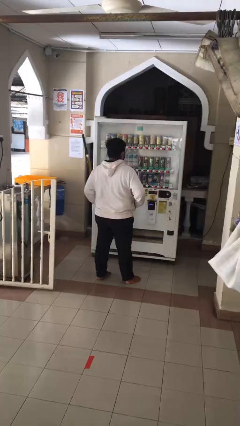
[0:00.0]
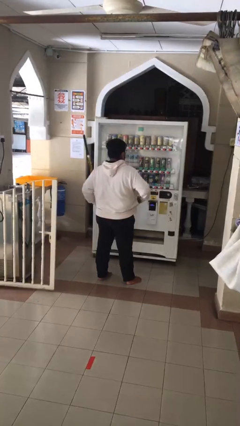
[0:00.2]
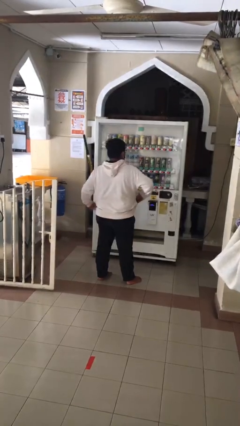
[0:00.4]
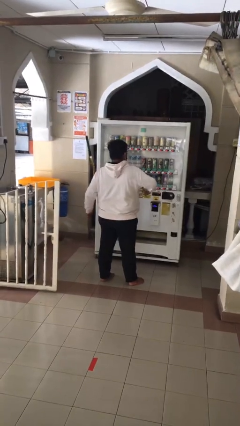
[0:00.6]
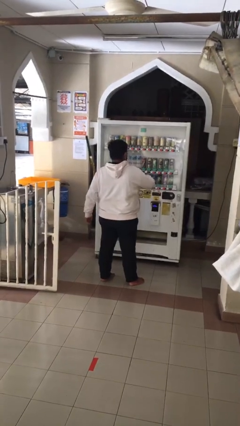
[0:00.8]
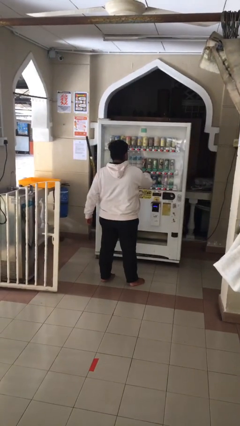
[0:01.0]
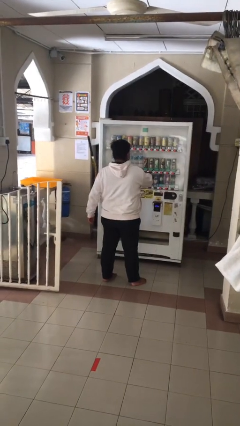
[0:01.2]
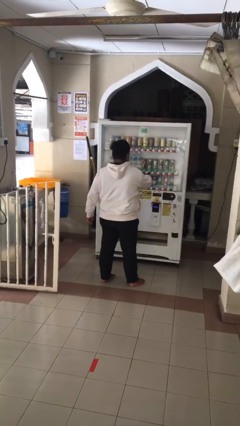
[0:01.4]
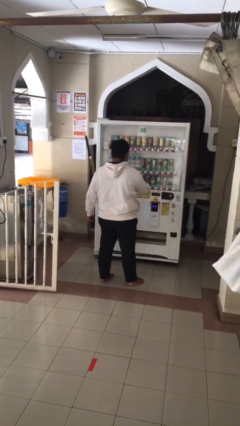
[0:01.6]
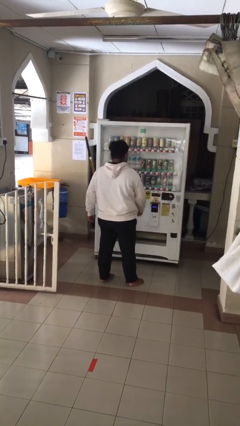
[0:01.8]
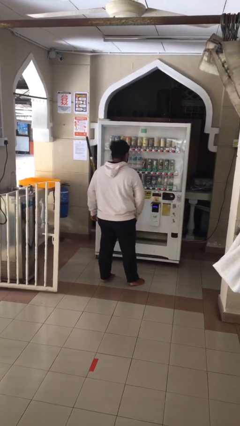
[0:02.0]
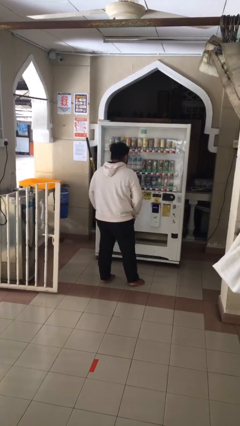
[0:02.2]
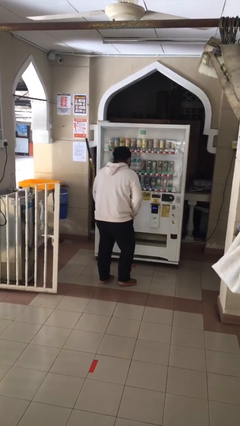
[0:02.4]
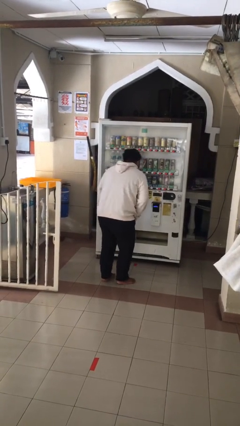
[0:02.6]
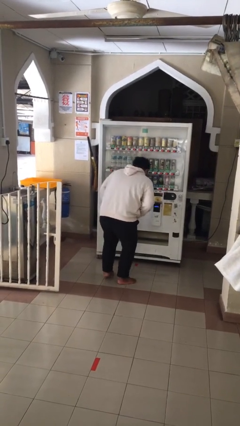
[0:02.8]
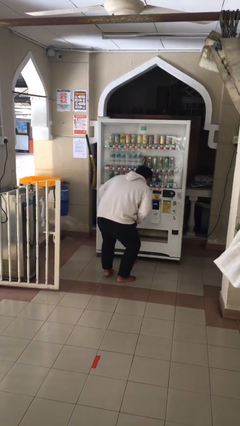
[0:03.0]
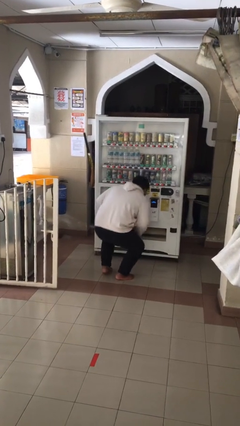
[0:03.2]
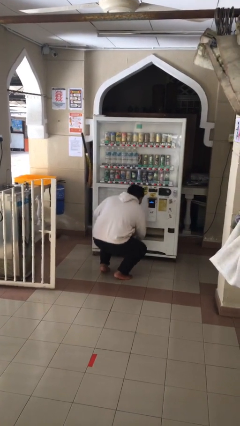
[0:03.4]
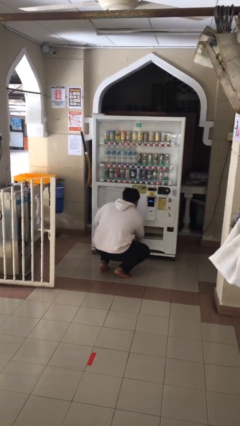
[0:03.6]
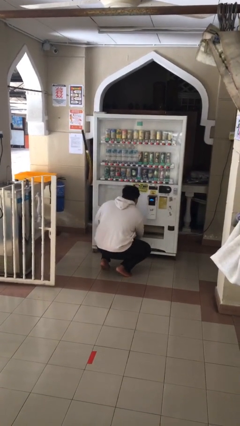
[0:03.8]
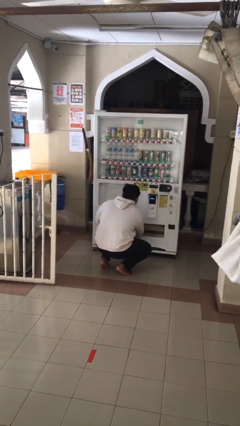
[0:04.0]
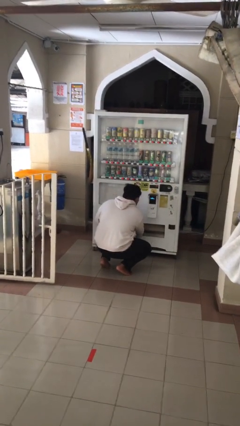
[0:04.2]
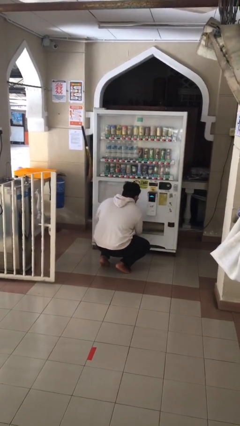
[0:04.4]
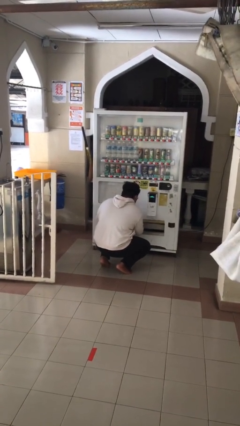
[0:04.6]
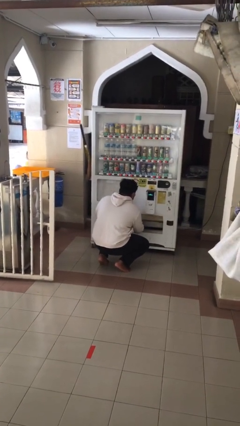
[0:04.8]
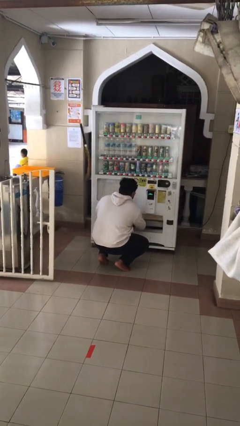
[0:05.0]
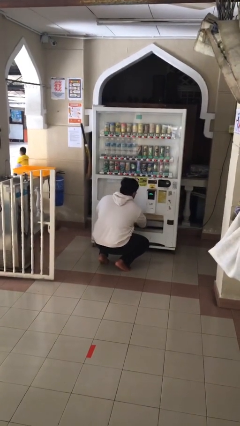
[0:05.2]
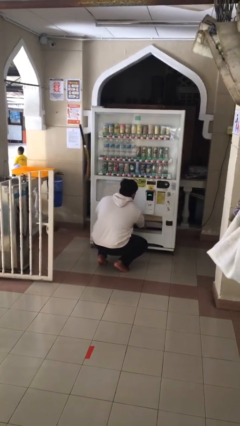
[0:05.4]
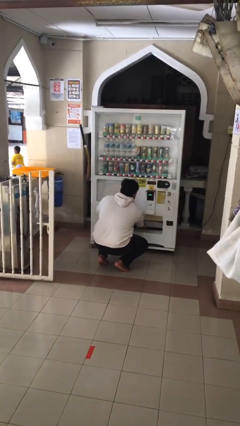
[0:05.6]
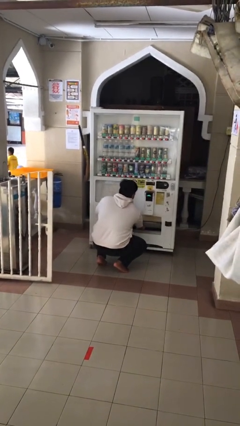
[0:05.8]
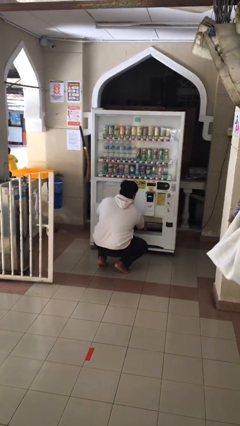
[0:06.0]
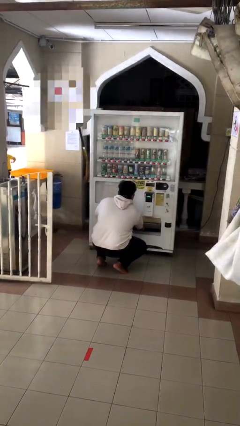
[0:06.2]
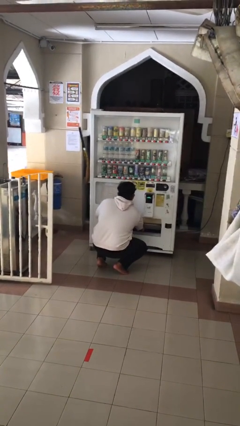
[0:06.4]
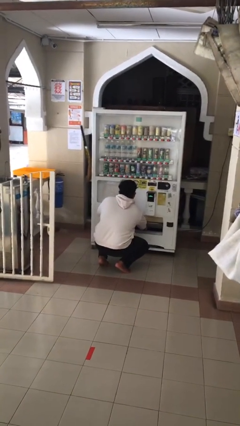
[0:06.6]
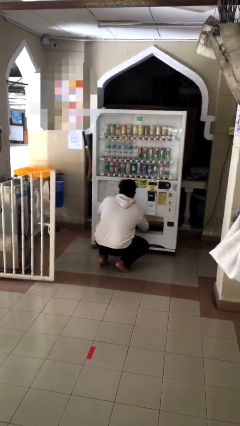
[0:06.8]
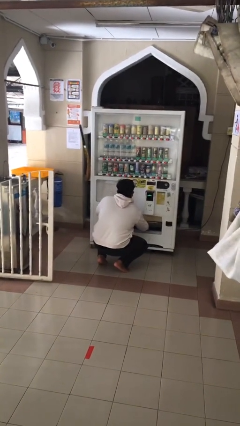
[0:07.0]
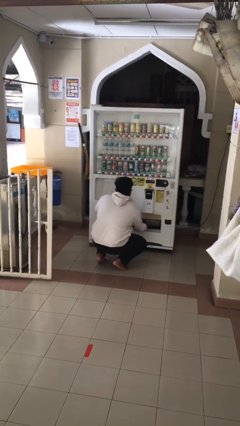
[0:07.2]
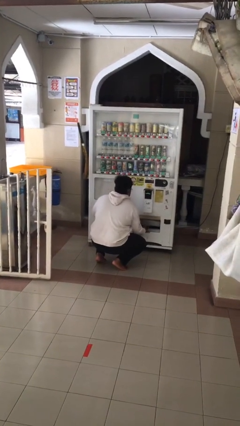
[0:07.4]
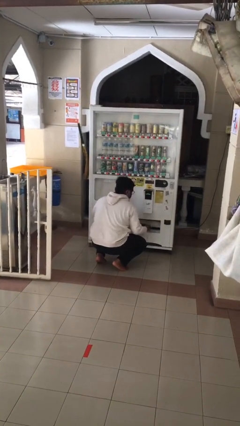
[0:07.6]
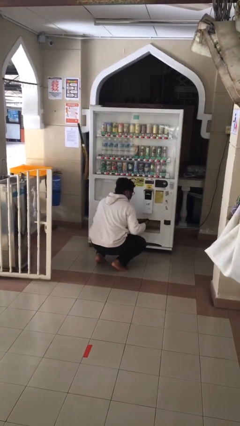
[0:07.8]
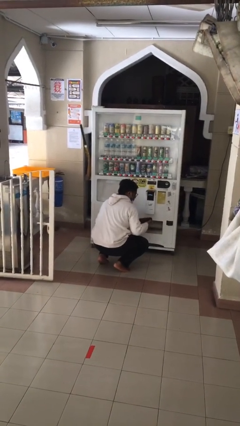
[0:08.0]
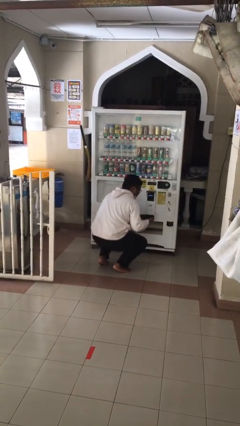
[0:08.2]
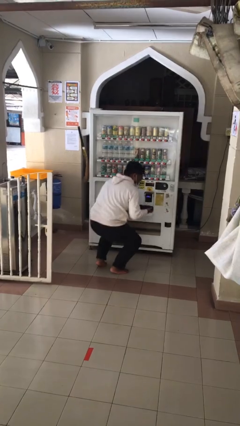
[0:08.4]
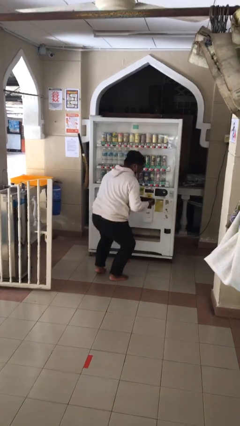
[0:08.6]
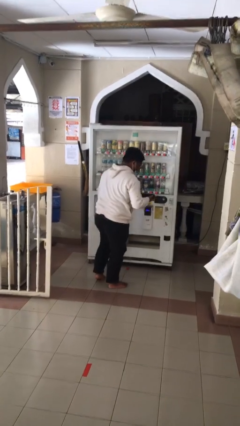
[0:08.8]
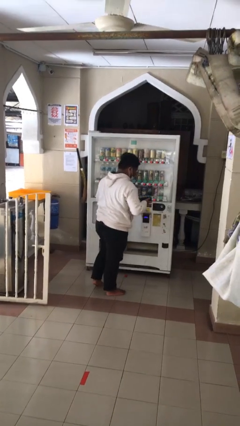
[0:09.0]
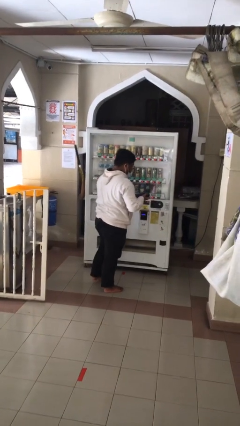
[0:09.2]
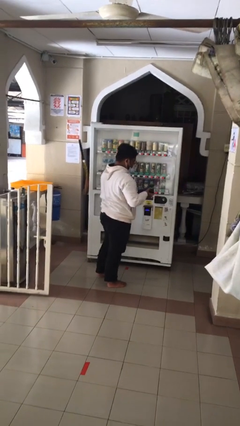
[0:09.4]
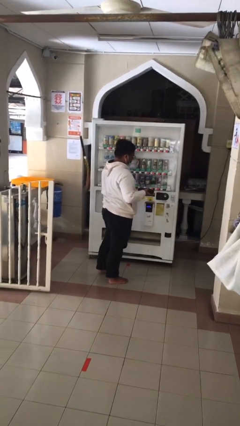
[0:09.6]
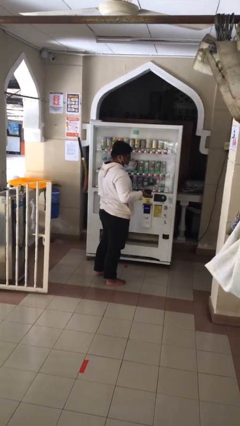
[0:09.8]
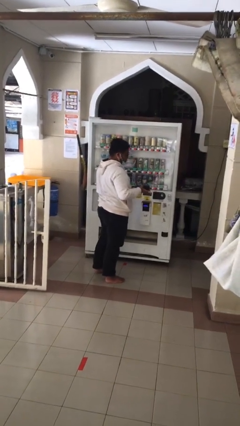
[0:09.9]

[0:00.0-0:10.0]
person purchases from machine

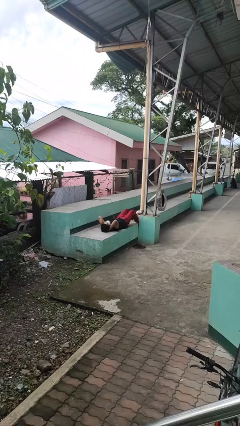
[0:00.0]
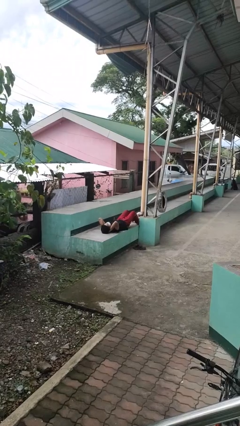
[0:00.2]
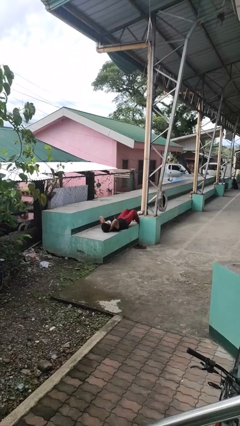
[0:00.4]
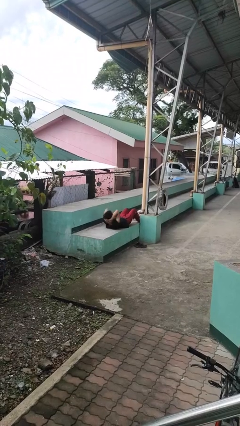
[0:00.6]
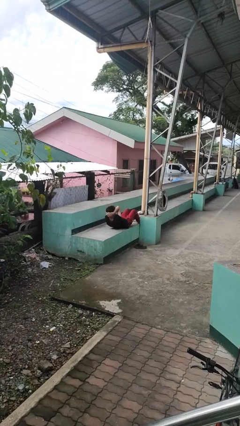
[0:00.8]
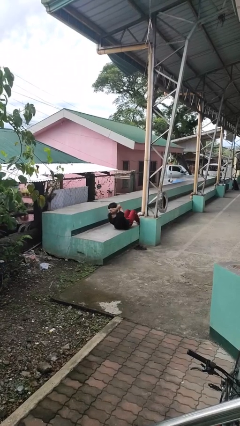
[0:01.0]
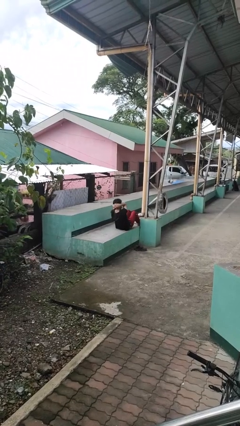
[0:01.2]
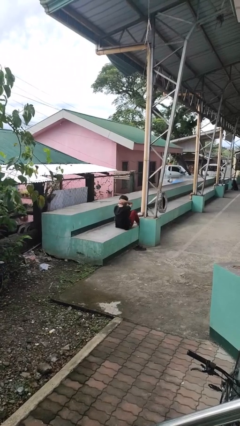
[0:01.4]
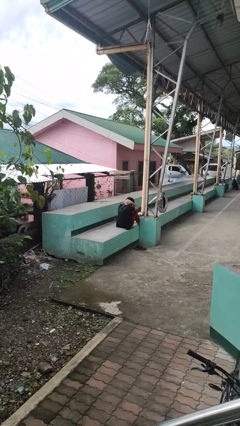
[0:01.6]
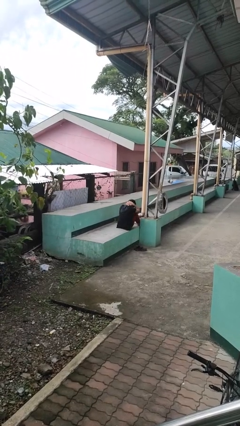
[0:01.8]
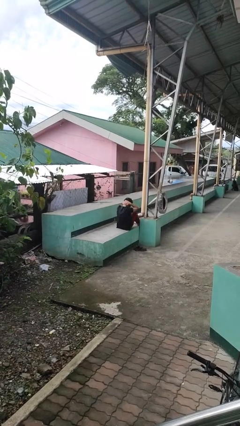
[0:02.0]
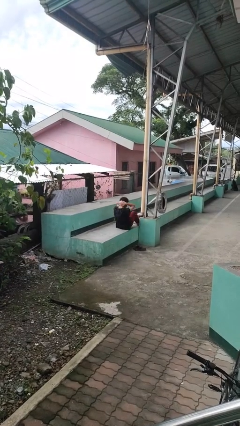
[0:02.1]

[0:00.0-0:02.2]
person exercises with situp

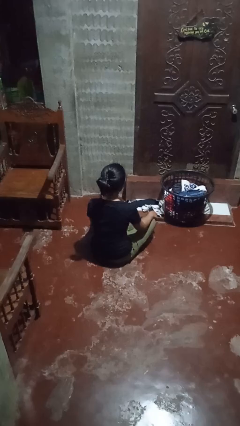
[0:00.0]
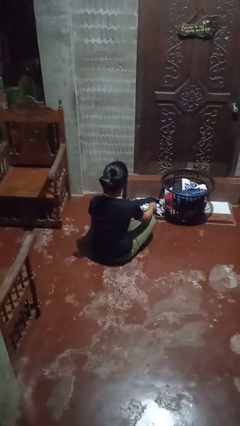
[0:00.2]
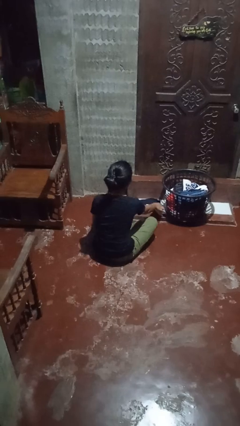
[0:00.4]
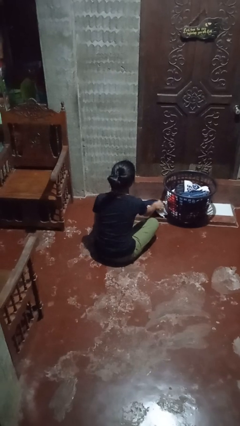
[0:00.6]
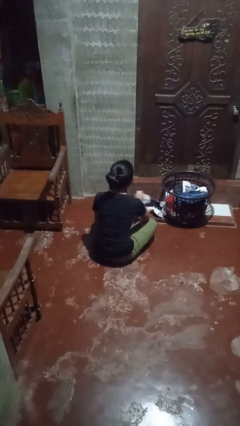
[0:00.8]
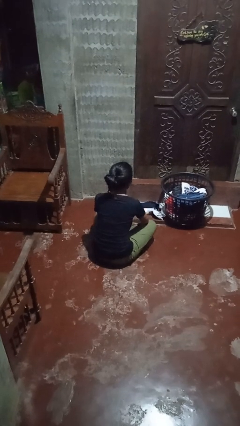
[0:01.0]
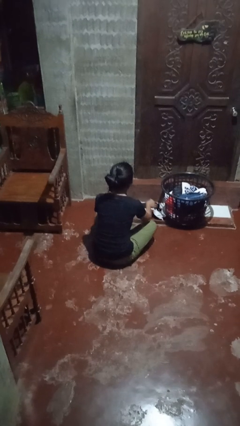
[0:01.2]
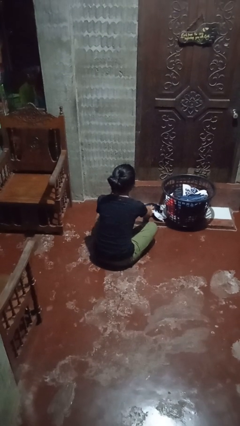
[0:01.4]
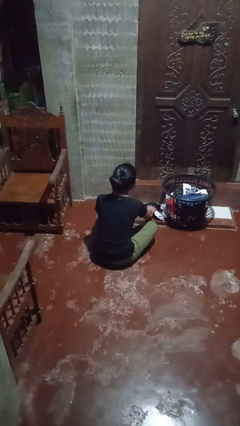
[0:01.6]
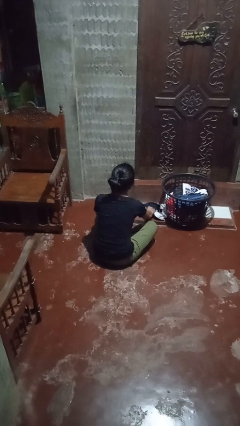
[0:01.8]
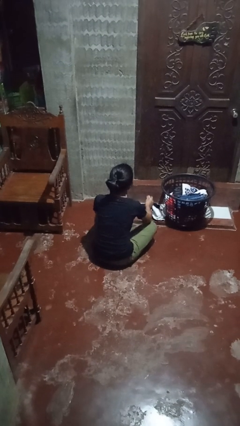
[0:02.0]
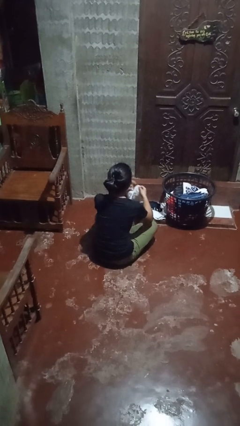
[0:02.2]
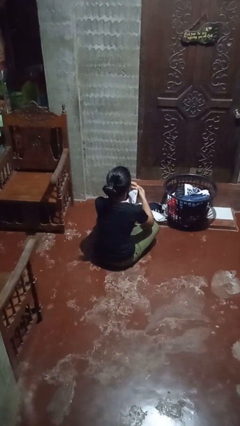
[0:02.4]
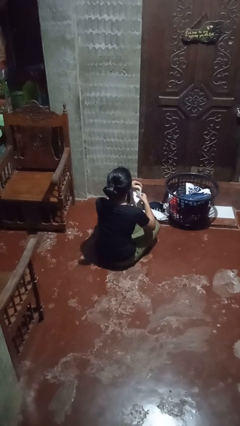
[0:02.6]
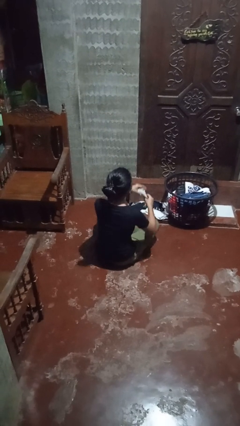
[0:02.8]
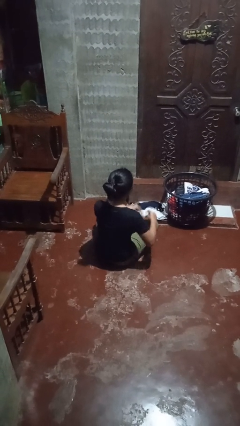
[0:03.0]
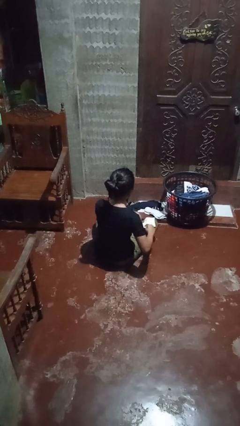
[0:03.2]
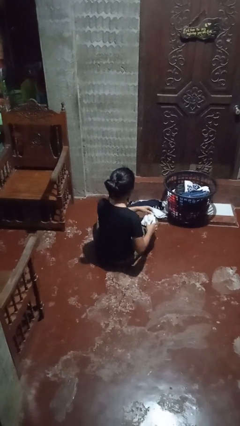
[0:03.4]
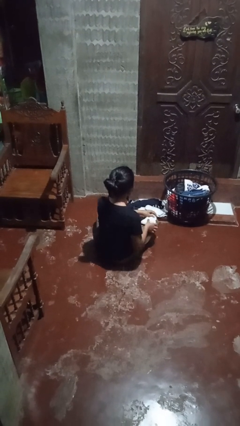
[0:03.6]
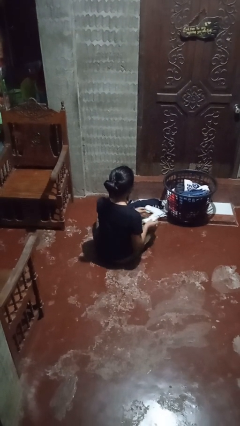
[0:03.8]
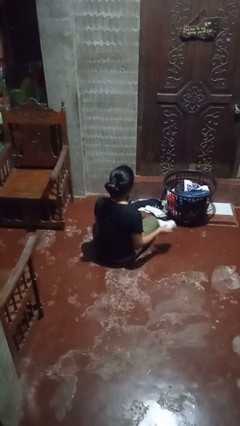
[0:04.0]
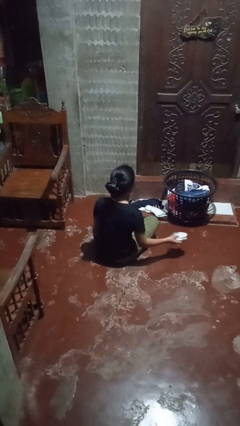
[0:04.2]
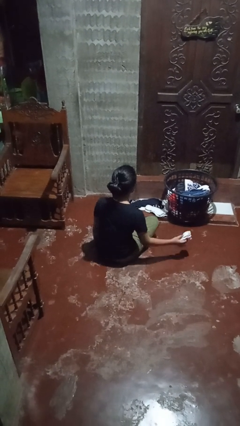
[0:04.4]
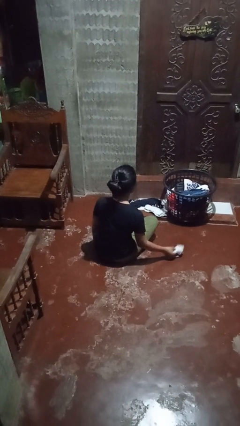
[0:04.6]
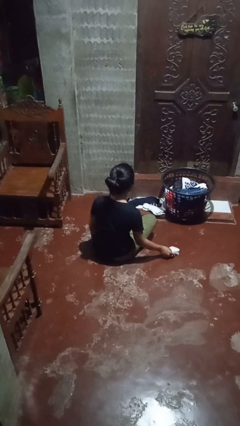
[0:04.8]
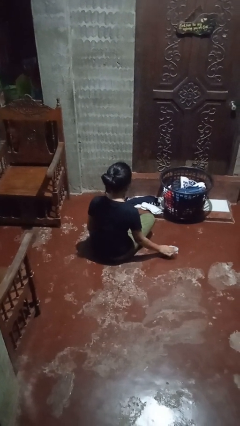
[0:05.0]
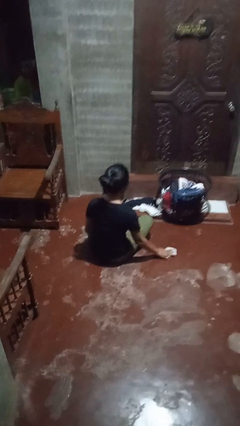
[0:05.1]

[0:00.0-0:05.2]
person folds socks

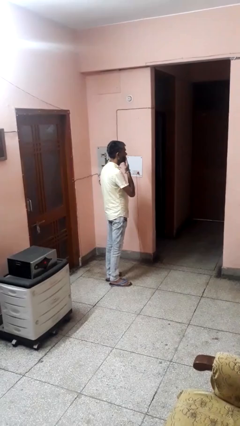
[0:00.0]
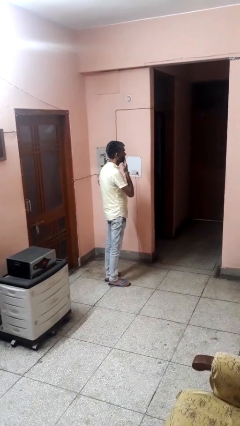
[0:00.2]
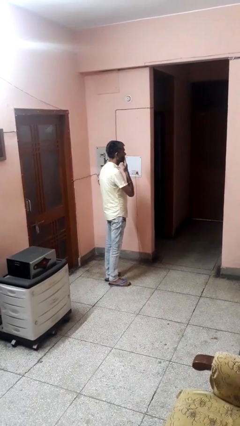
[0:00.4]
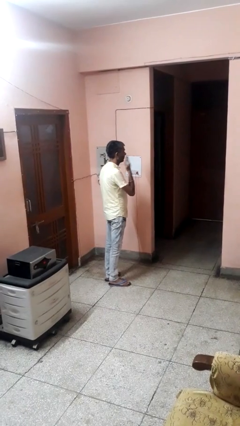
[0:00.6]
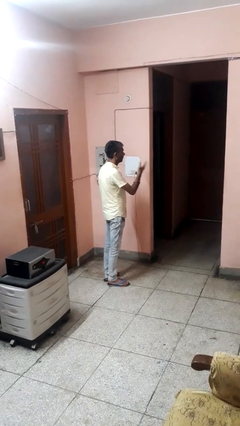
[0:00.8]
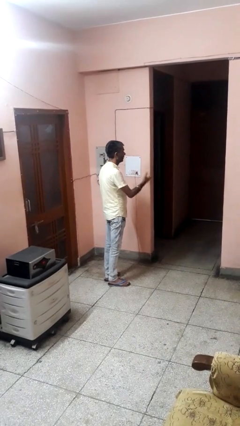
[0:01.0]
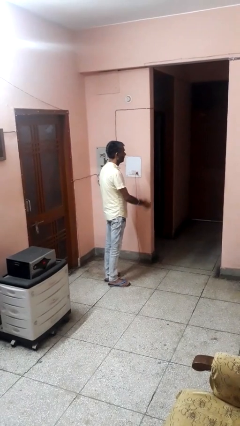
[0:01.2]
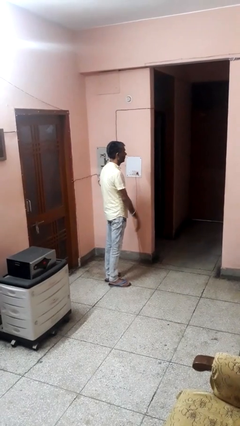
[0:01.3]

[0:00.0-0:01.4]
person gestures blow kiss
